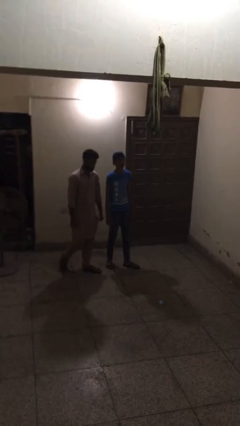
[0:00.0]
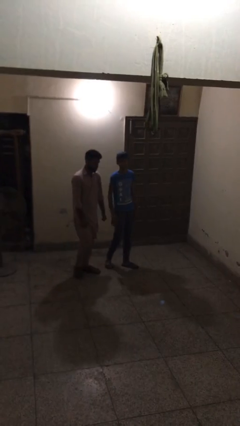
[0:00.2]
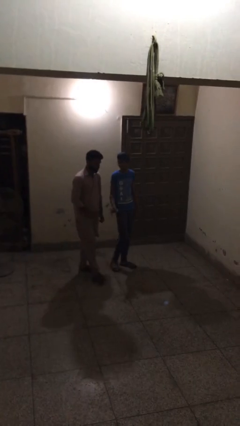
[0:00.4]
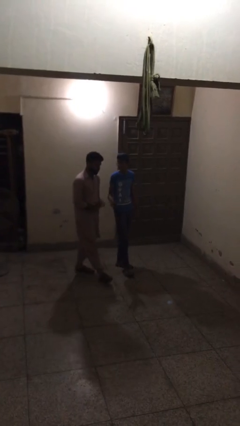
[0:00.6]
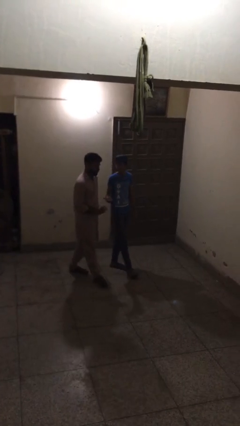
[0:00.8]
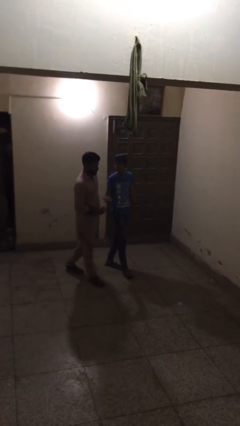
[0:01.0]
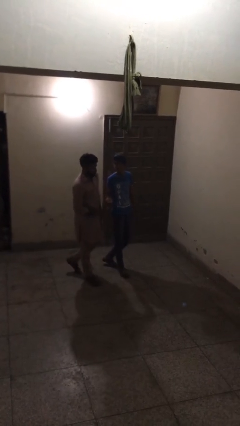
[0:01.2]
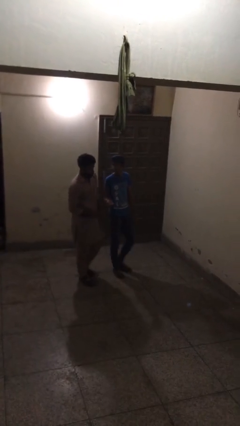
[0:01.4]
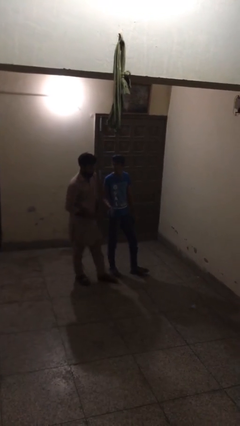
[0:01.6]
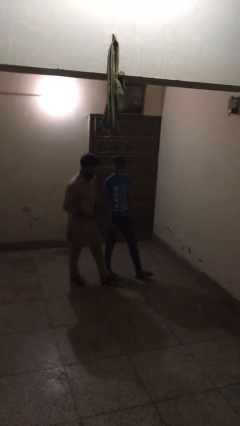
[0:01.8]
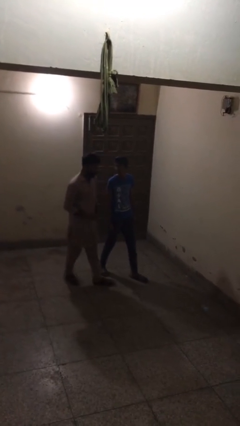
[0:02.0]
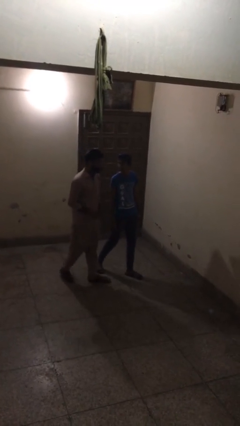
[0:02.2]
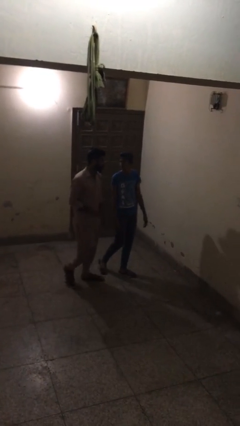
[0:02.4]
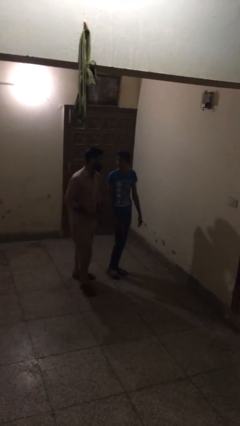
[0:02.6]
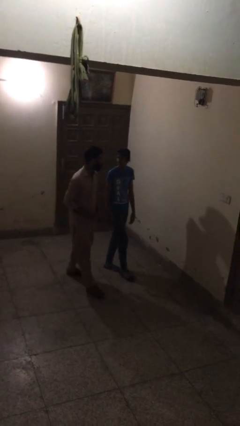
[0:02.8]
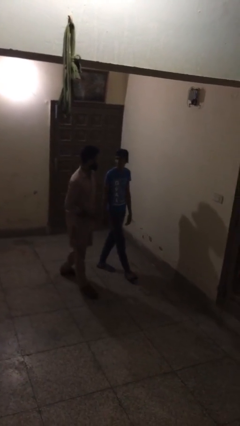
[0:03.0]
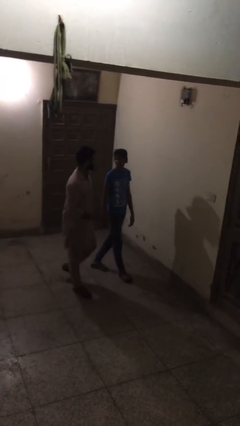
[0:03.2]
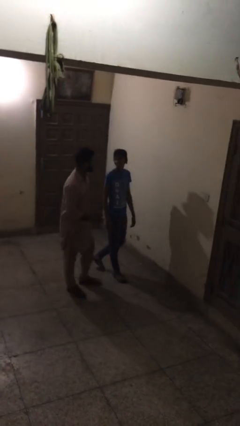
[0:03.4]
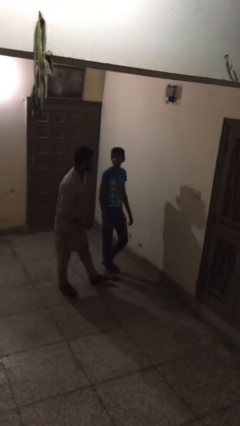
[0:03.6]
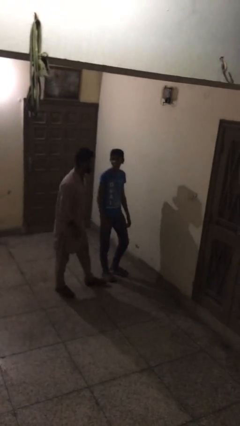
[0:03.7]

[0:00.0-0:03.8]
person talks to person

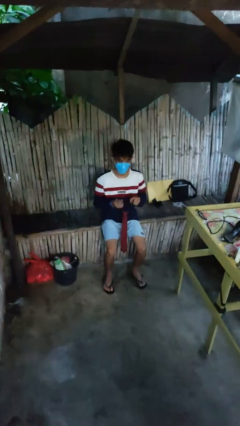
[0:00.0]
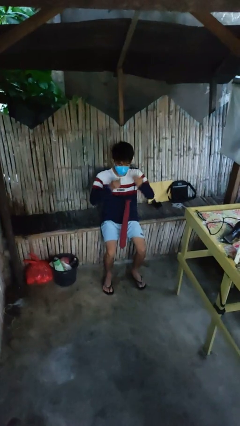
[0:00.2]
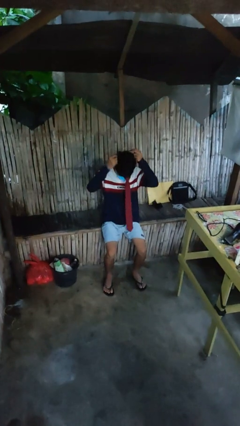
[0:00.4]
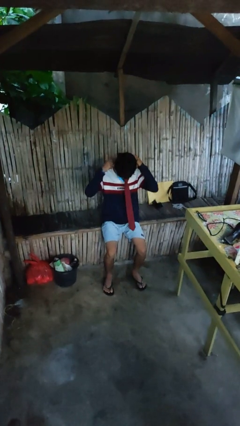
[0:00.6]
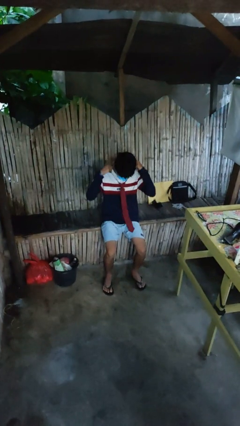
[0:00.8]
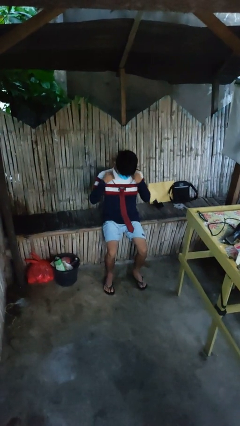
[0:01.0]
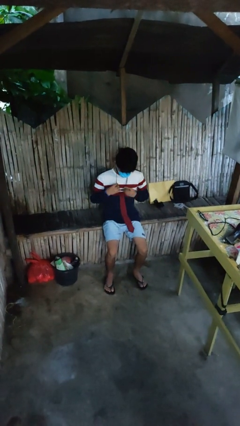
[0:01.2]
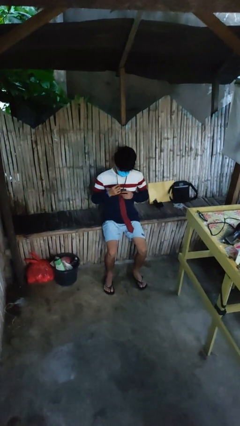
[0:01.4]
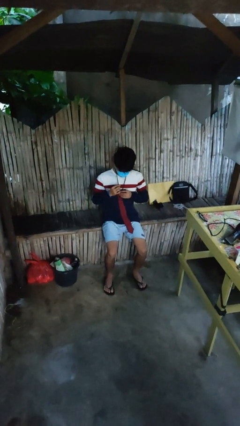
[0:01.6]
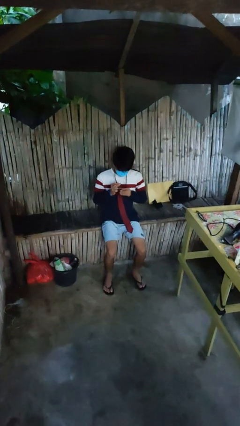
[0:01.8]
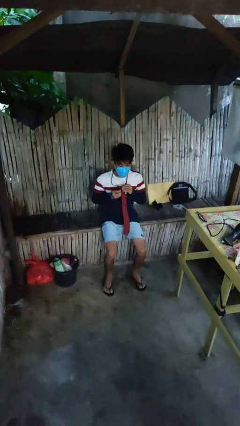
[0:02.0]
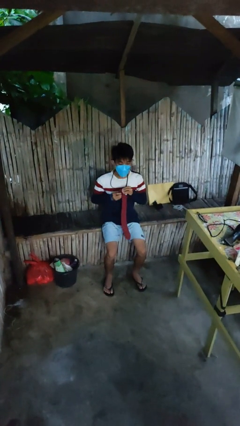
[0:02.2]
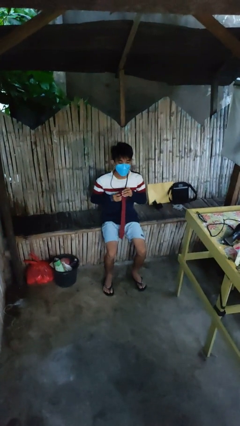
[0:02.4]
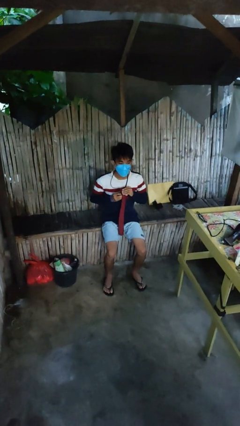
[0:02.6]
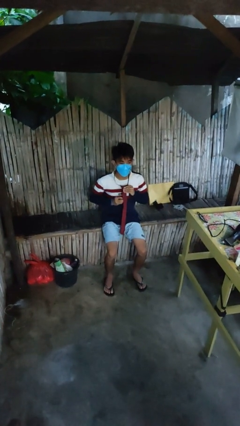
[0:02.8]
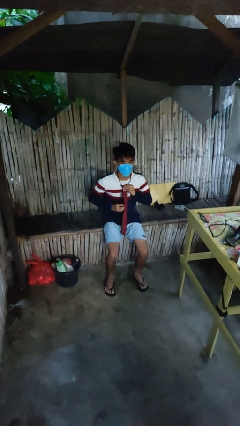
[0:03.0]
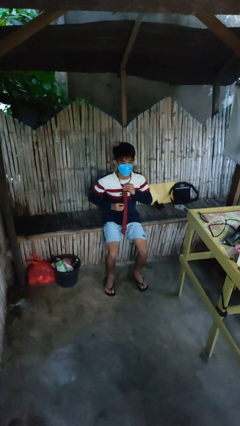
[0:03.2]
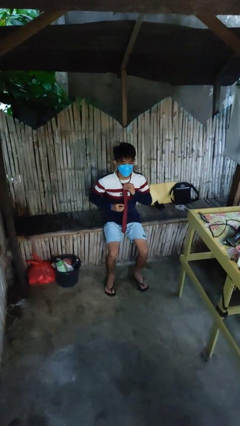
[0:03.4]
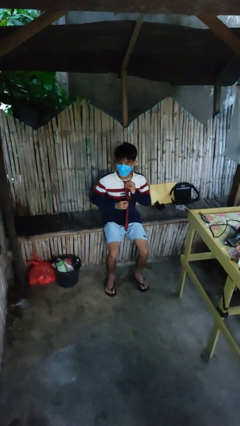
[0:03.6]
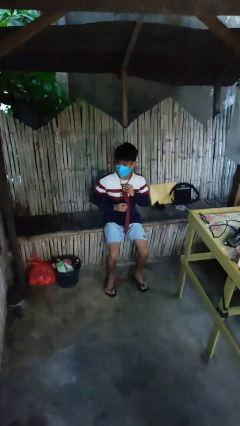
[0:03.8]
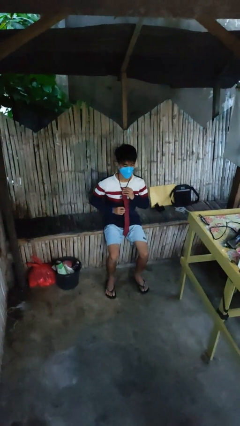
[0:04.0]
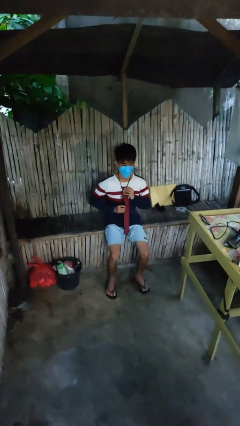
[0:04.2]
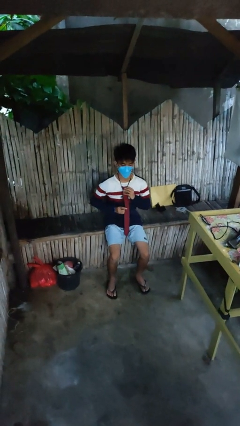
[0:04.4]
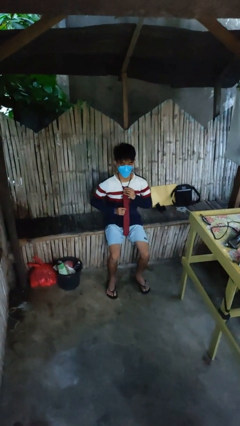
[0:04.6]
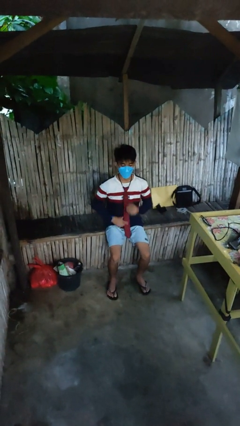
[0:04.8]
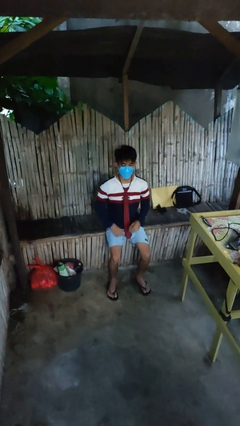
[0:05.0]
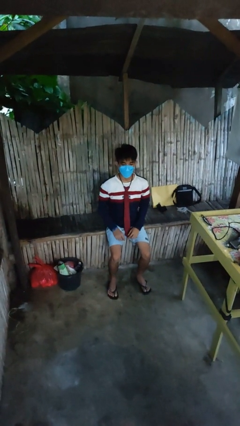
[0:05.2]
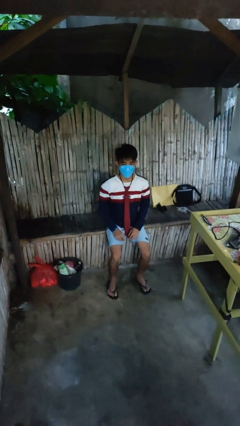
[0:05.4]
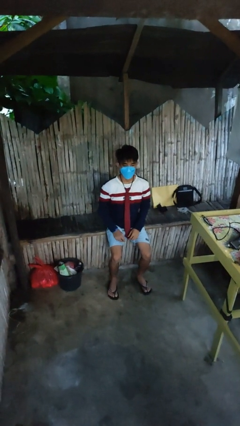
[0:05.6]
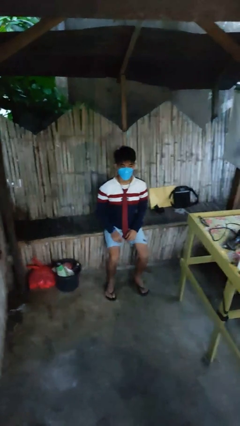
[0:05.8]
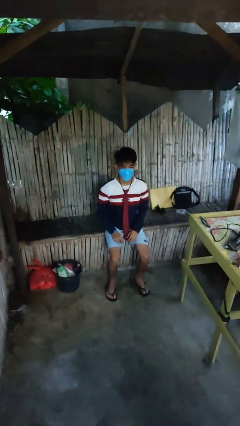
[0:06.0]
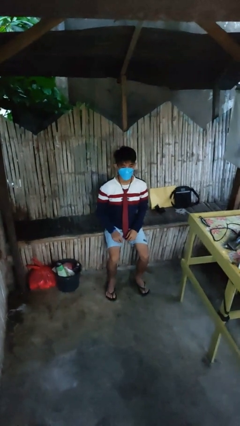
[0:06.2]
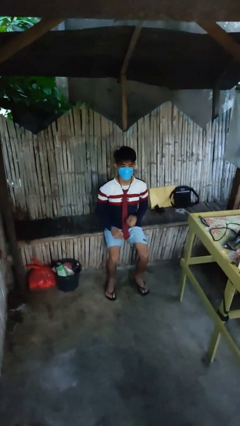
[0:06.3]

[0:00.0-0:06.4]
person puts on necktie

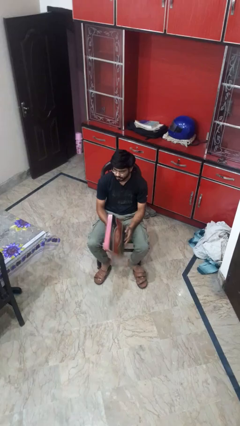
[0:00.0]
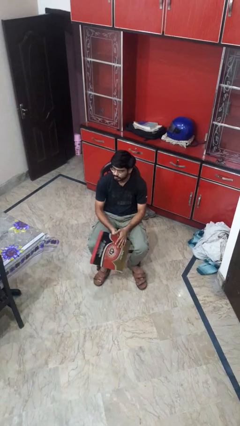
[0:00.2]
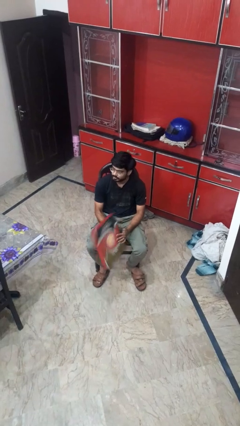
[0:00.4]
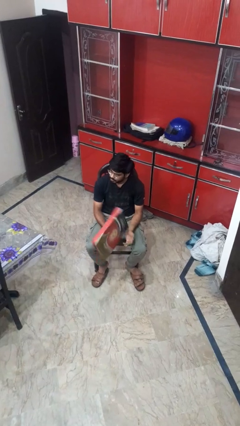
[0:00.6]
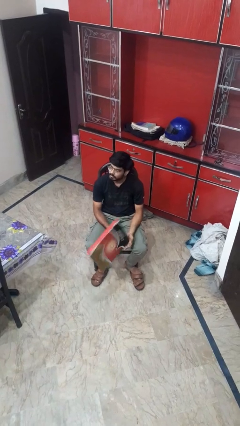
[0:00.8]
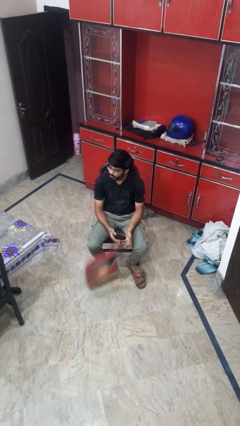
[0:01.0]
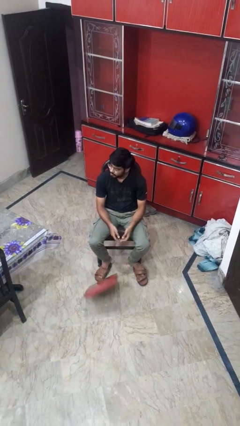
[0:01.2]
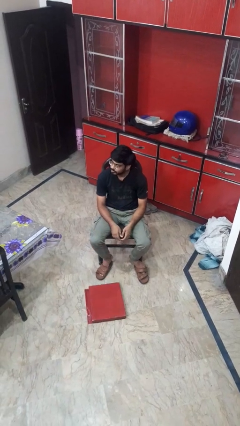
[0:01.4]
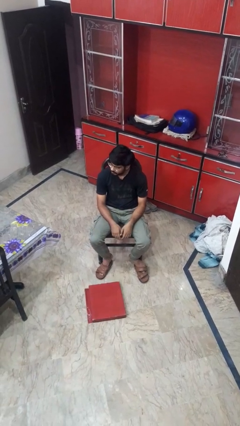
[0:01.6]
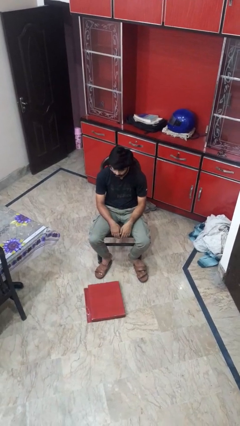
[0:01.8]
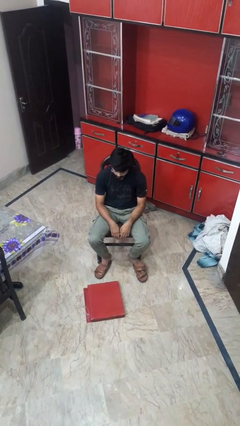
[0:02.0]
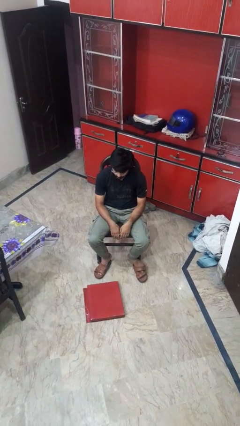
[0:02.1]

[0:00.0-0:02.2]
person drops object

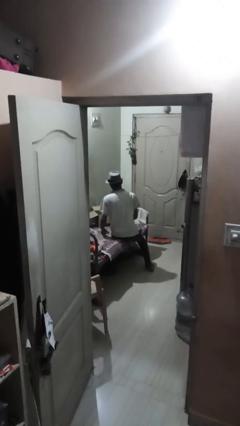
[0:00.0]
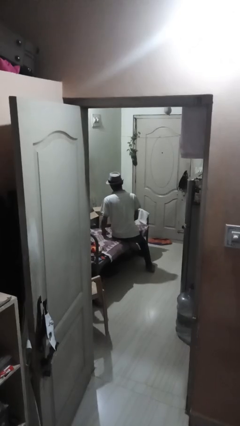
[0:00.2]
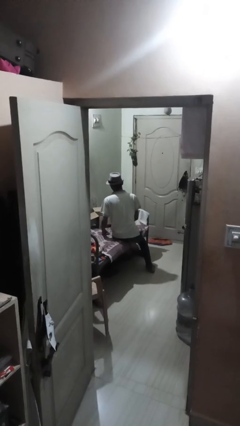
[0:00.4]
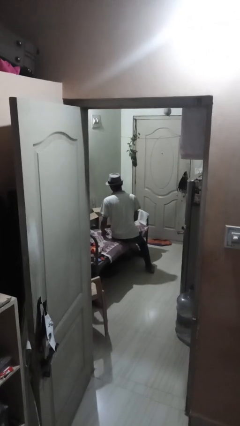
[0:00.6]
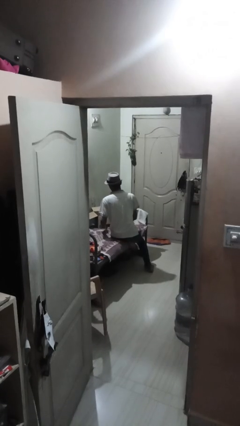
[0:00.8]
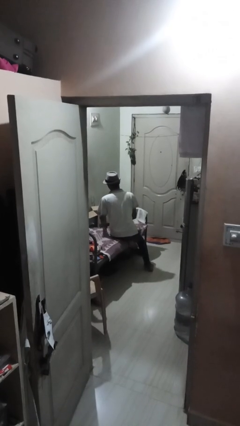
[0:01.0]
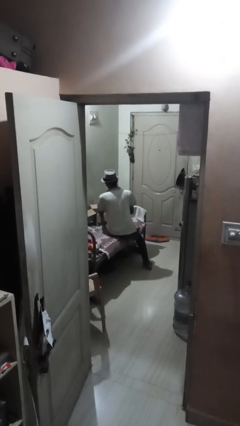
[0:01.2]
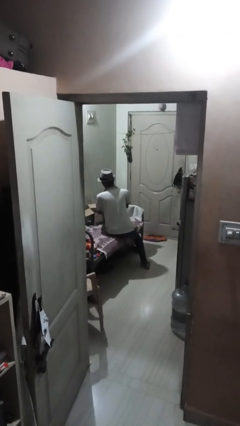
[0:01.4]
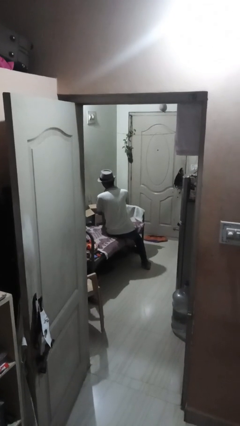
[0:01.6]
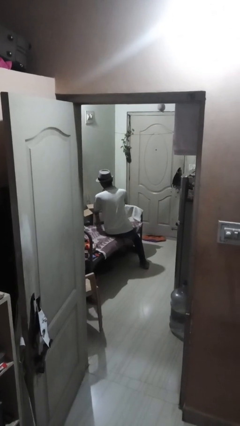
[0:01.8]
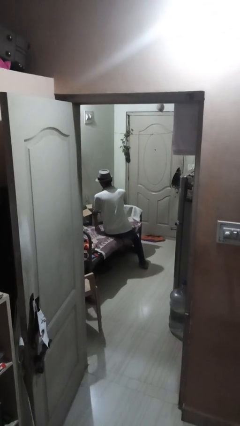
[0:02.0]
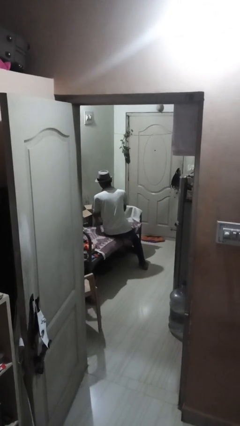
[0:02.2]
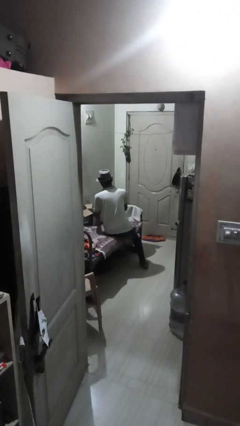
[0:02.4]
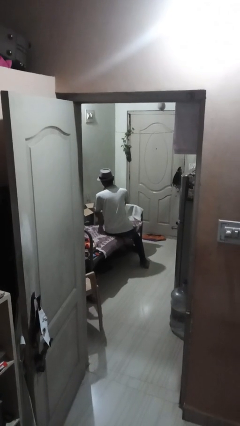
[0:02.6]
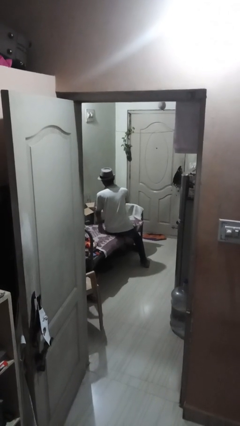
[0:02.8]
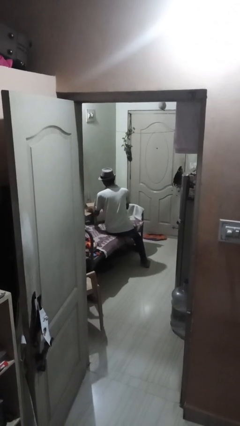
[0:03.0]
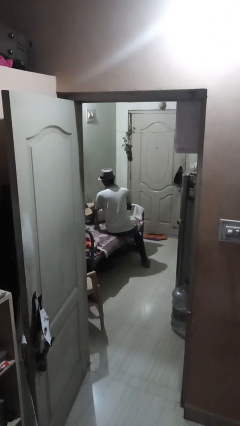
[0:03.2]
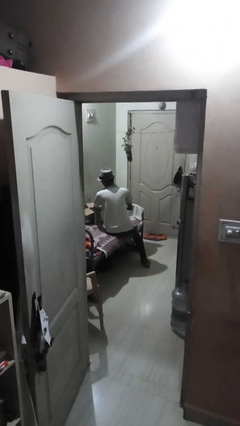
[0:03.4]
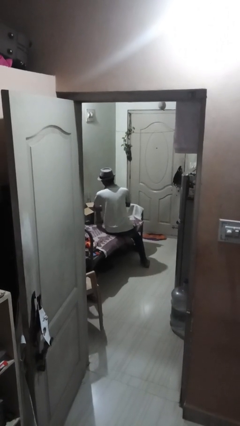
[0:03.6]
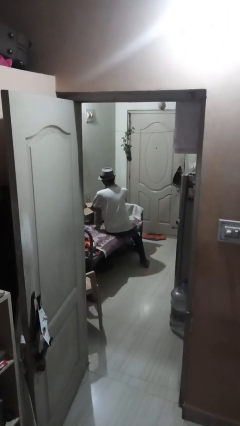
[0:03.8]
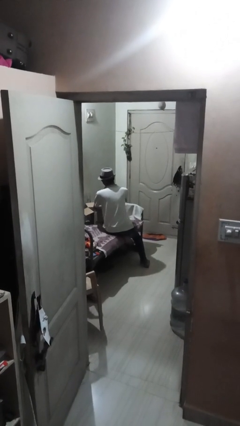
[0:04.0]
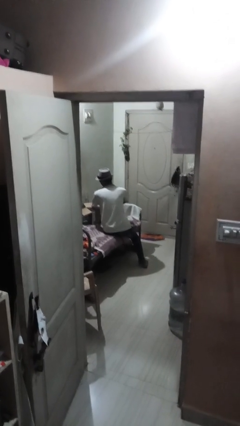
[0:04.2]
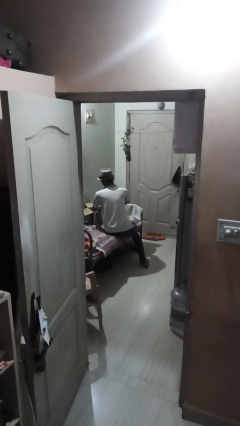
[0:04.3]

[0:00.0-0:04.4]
person searches in box

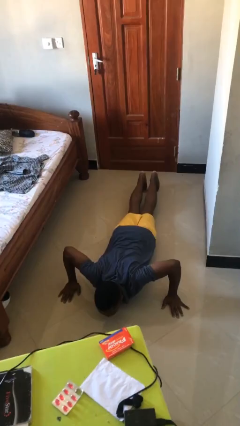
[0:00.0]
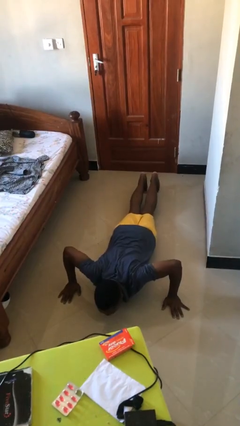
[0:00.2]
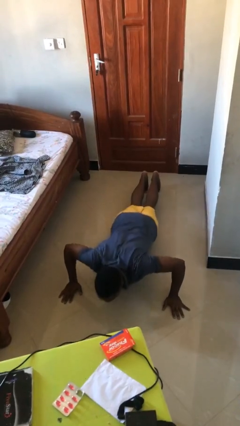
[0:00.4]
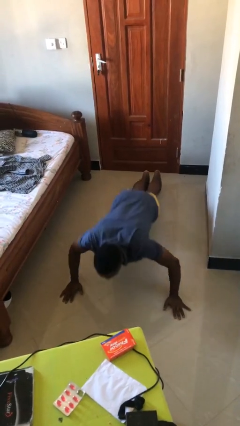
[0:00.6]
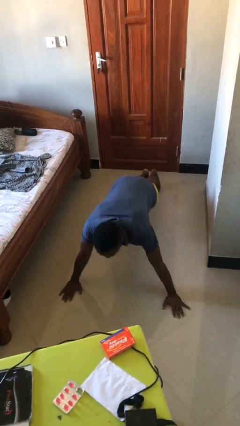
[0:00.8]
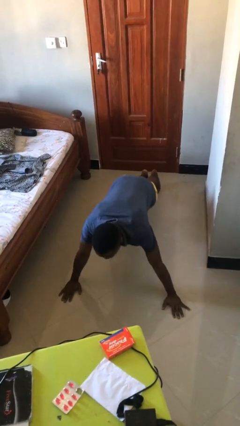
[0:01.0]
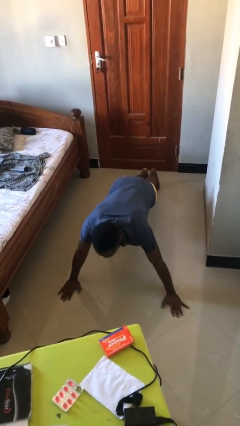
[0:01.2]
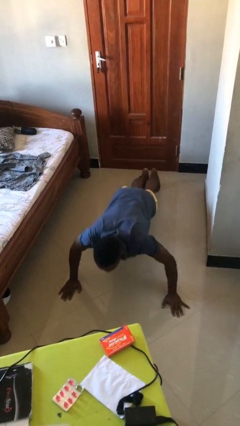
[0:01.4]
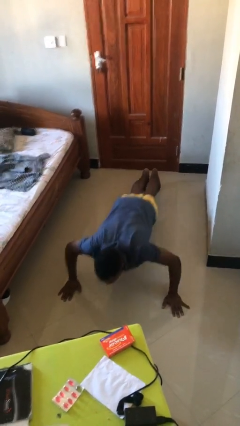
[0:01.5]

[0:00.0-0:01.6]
person exercises with pushup
